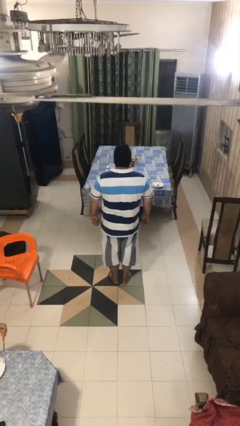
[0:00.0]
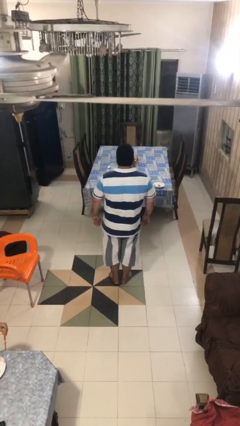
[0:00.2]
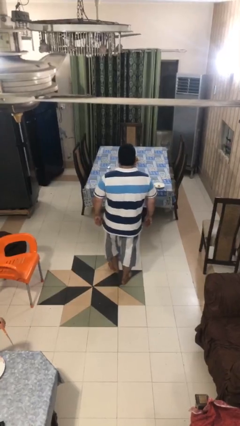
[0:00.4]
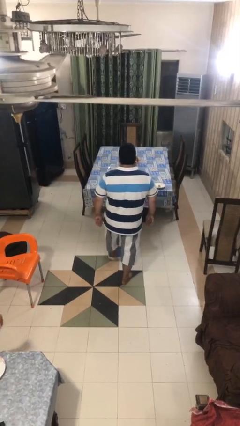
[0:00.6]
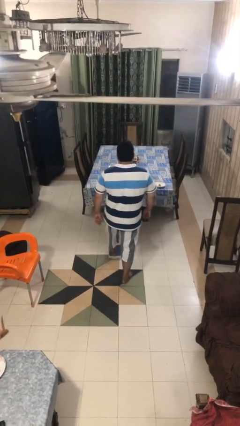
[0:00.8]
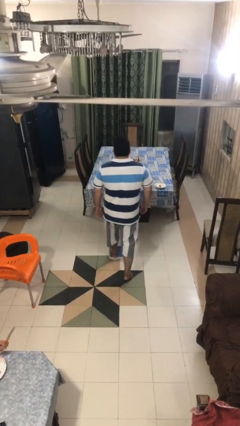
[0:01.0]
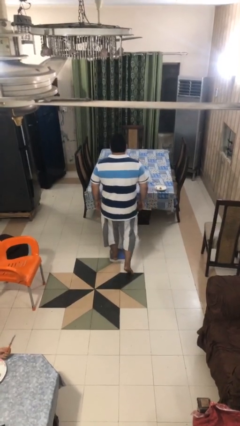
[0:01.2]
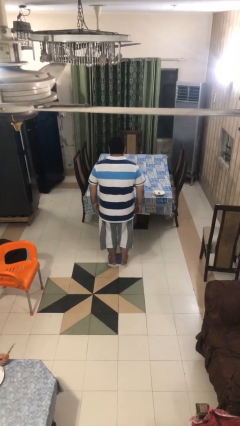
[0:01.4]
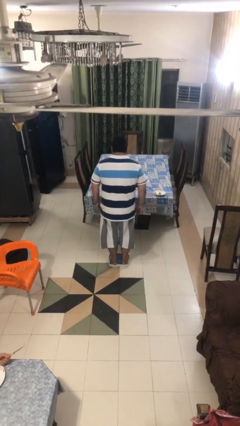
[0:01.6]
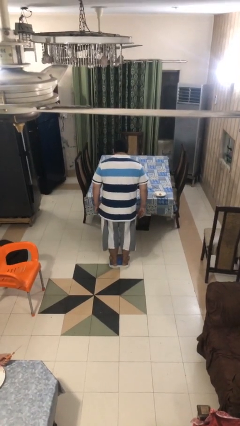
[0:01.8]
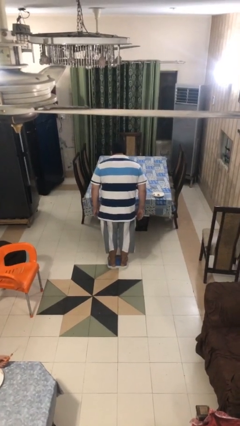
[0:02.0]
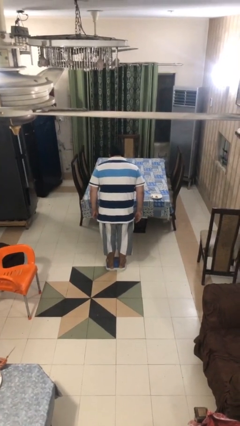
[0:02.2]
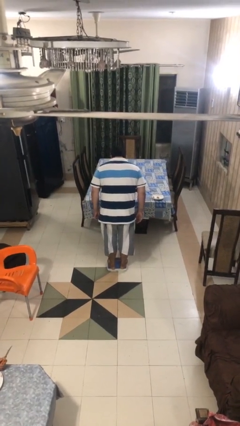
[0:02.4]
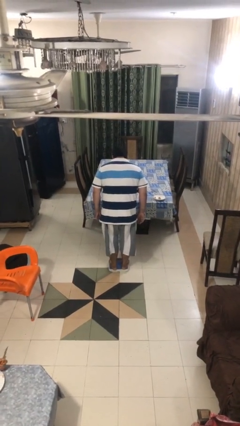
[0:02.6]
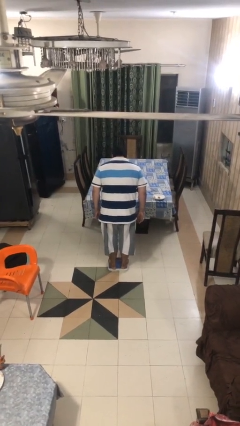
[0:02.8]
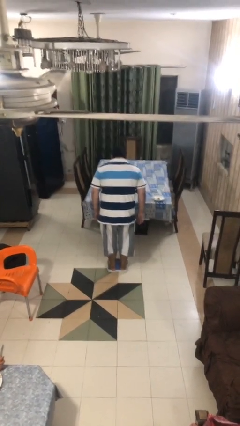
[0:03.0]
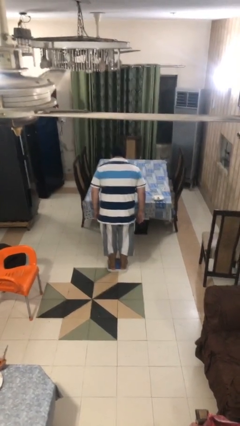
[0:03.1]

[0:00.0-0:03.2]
person uses bodyweight scale

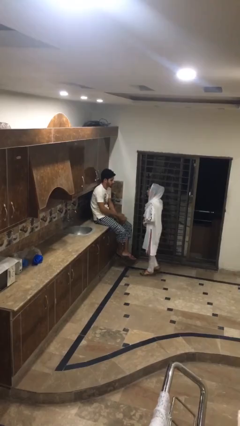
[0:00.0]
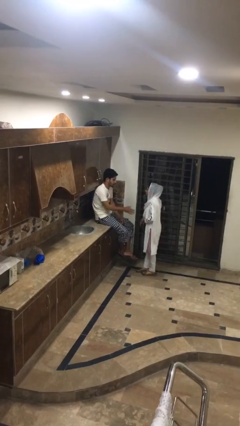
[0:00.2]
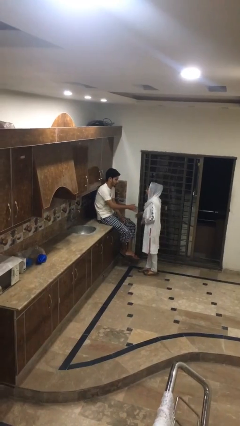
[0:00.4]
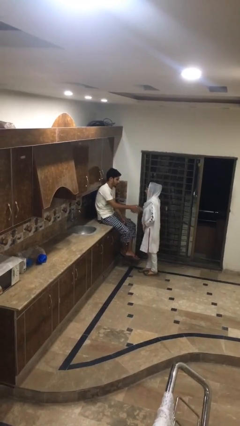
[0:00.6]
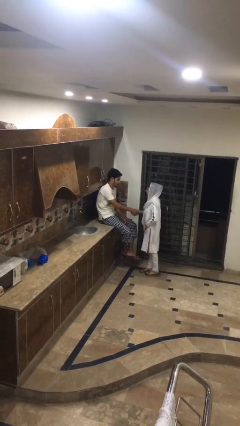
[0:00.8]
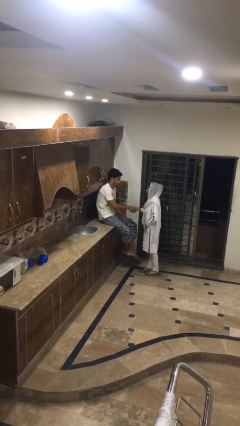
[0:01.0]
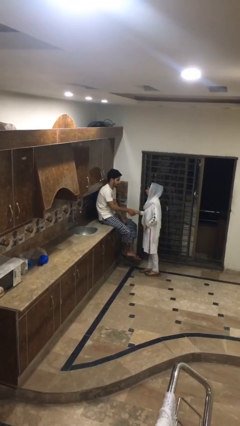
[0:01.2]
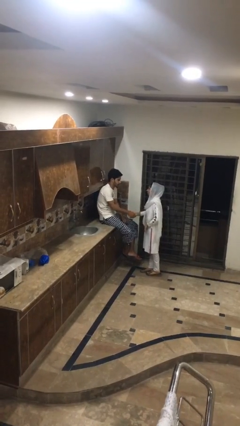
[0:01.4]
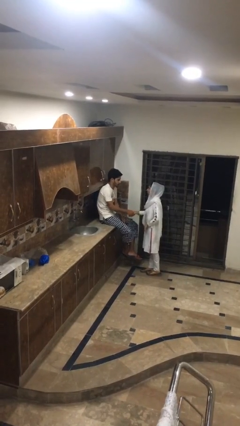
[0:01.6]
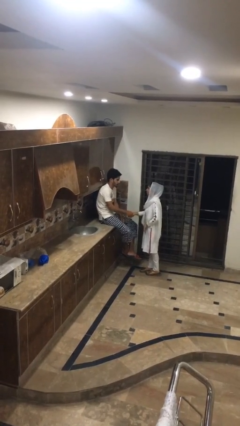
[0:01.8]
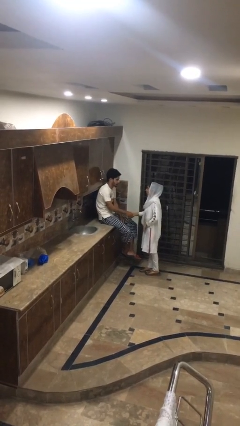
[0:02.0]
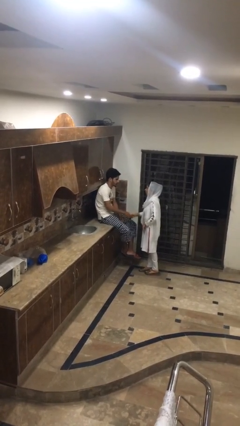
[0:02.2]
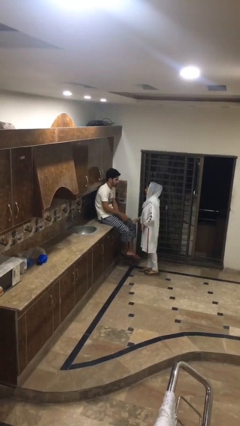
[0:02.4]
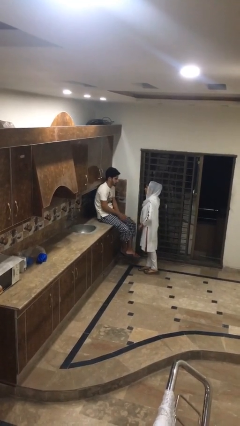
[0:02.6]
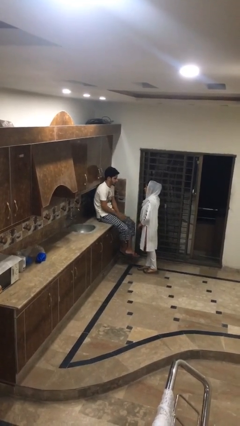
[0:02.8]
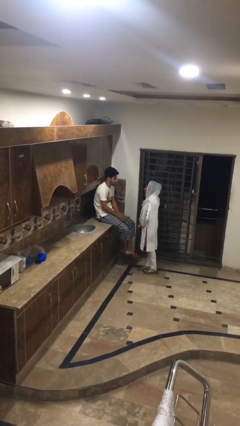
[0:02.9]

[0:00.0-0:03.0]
person shakes hand

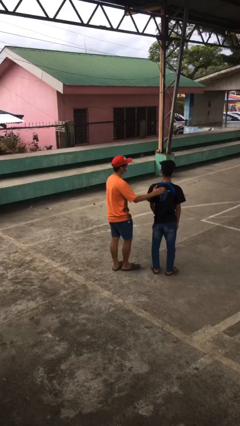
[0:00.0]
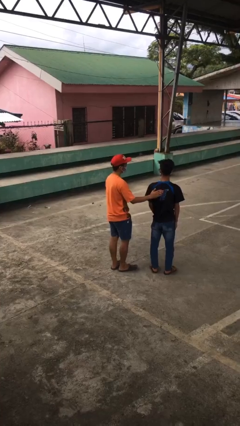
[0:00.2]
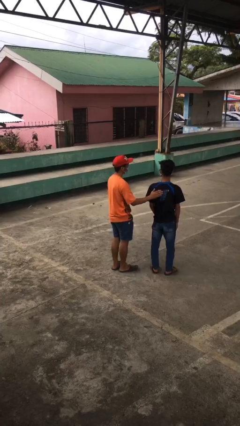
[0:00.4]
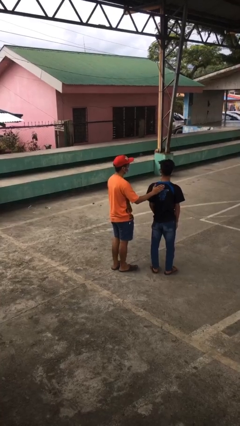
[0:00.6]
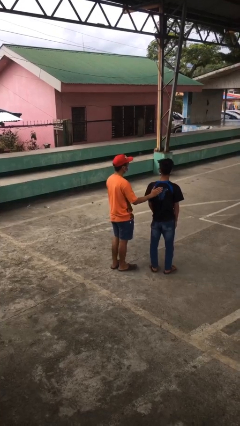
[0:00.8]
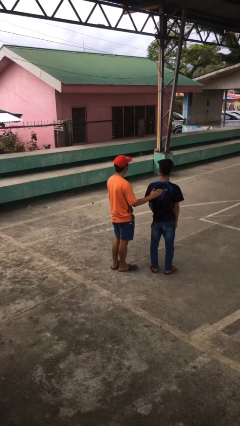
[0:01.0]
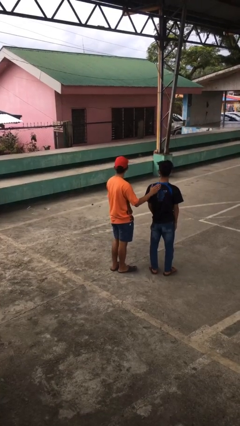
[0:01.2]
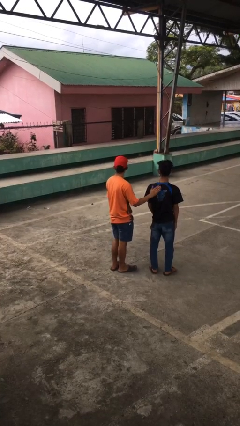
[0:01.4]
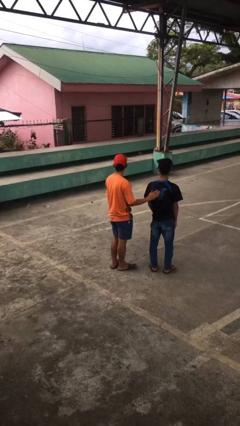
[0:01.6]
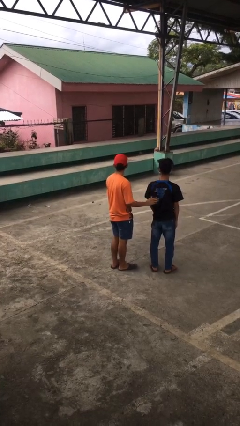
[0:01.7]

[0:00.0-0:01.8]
person touches back of person

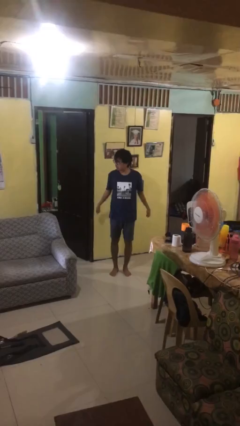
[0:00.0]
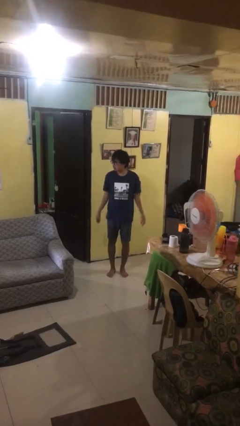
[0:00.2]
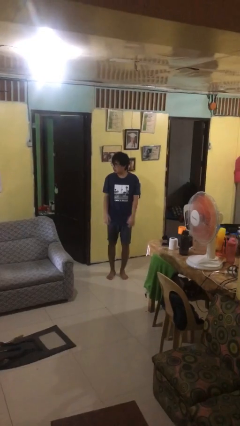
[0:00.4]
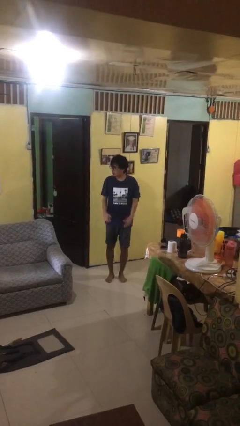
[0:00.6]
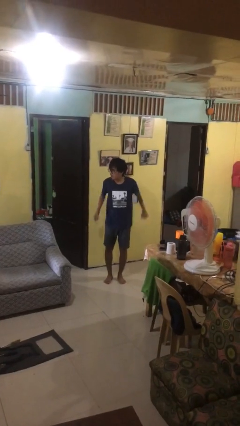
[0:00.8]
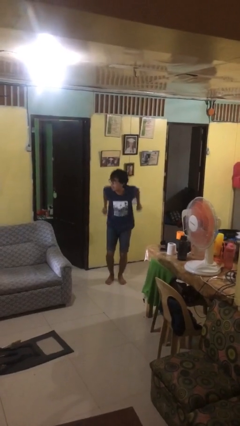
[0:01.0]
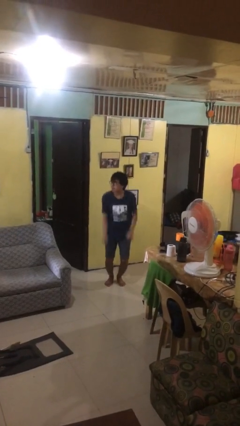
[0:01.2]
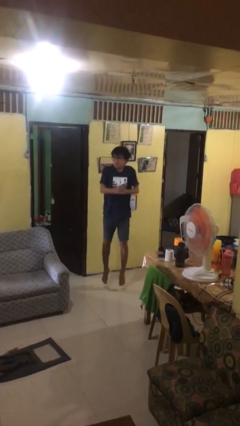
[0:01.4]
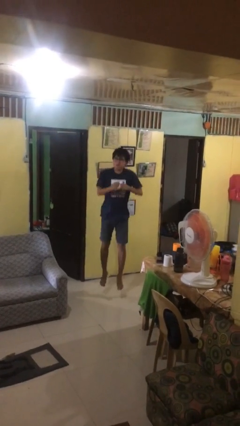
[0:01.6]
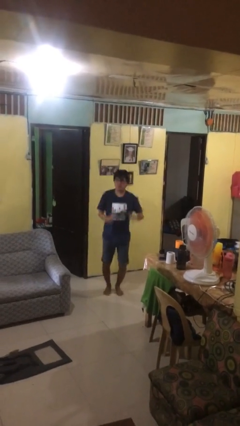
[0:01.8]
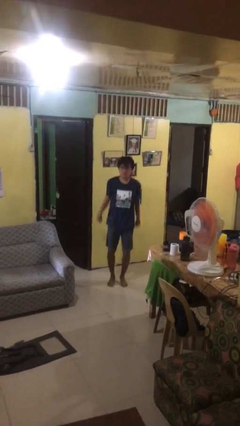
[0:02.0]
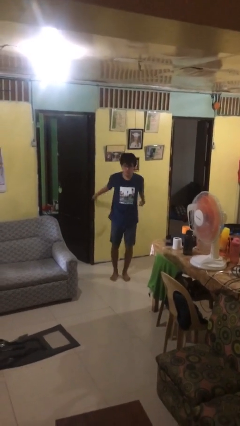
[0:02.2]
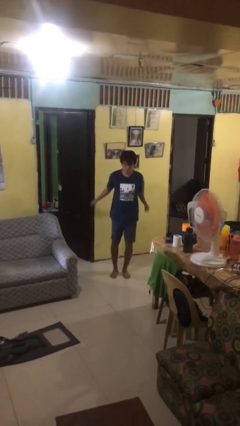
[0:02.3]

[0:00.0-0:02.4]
person jumps

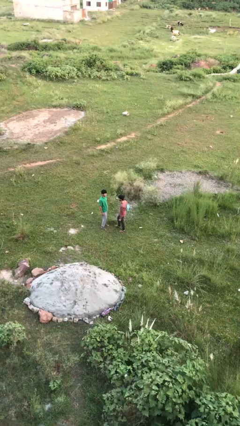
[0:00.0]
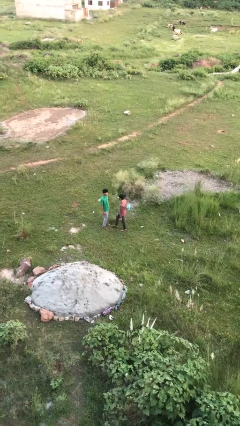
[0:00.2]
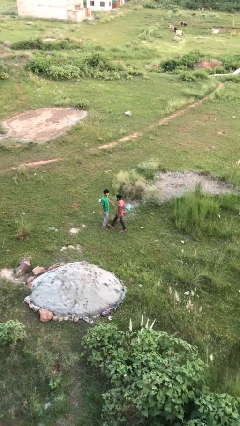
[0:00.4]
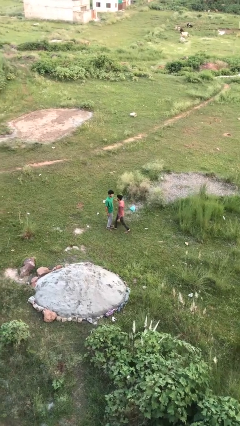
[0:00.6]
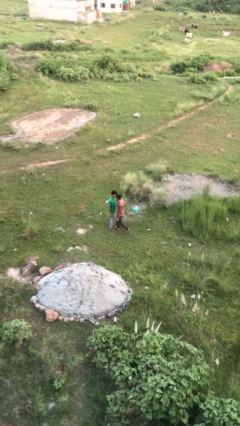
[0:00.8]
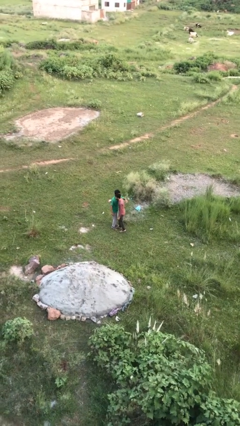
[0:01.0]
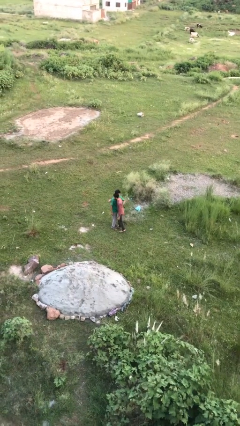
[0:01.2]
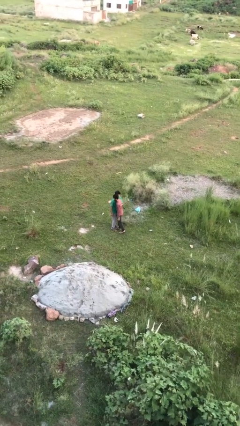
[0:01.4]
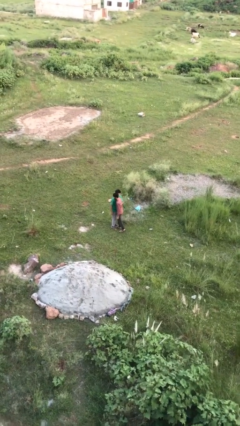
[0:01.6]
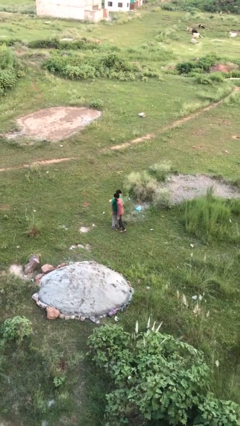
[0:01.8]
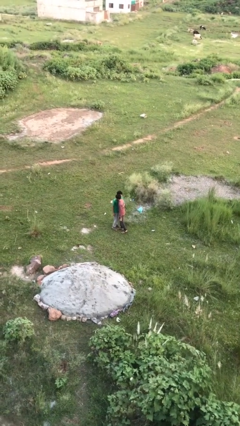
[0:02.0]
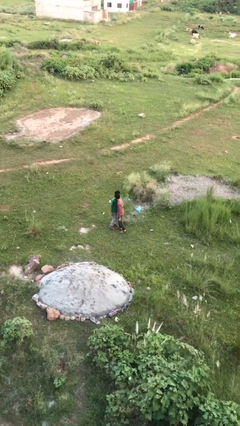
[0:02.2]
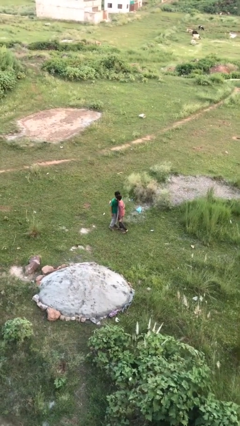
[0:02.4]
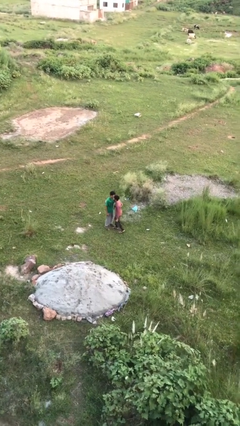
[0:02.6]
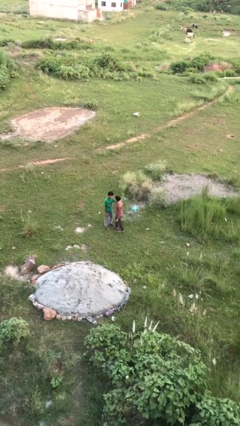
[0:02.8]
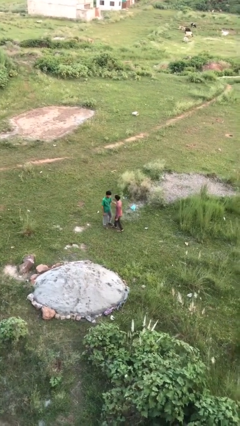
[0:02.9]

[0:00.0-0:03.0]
person embraces person

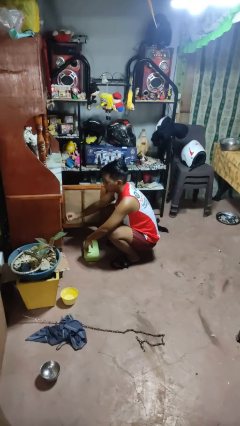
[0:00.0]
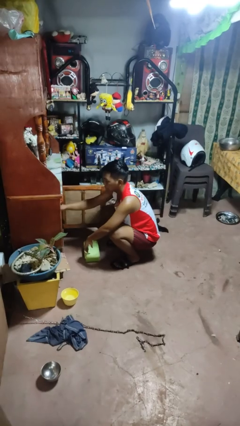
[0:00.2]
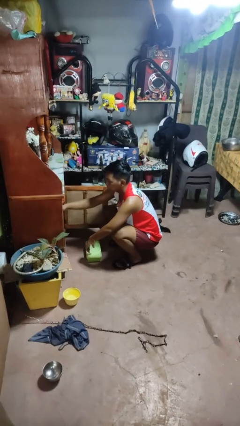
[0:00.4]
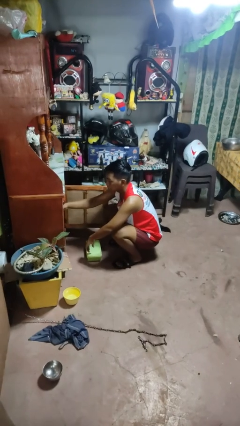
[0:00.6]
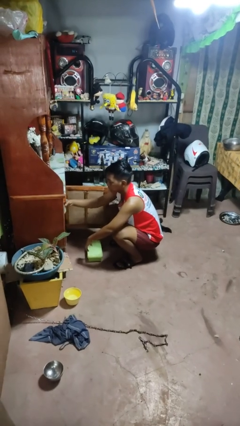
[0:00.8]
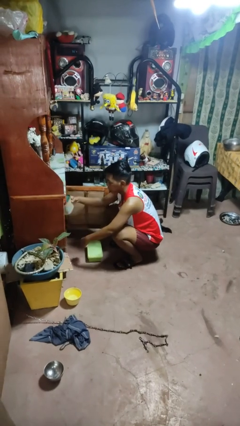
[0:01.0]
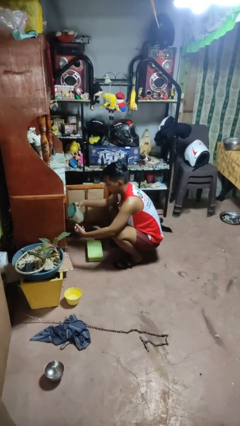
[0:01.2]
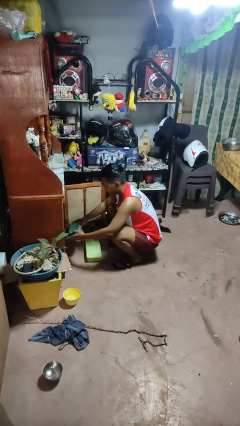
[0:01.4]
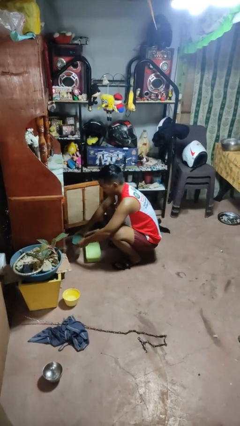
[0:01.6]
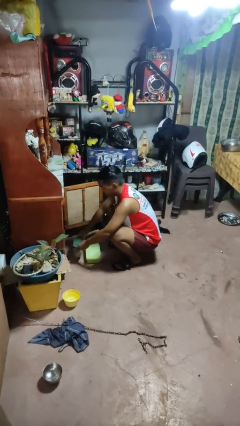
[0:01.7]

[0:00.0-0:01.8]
person takes object from cabinet

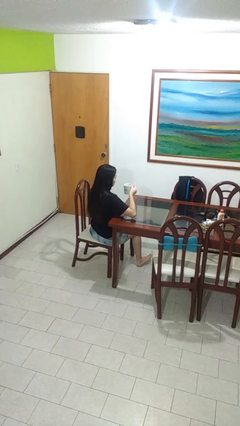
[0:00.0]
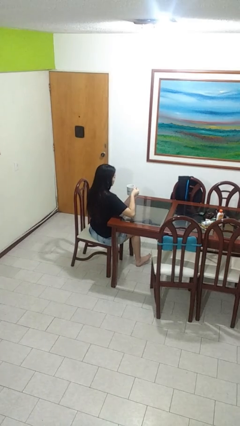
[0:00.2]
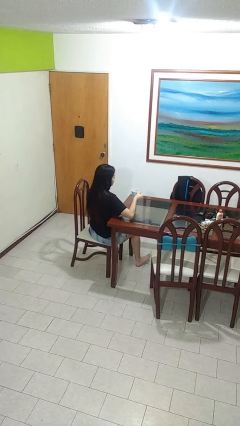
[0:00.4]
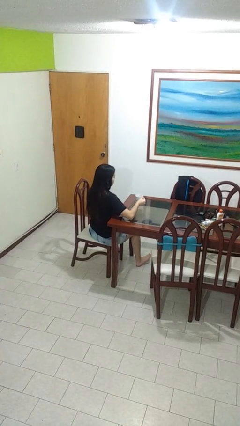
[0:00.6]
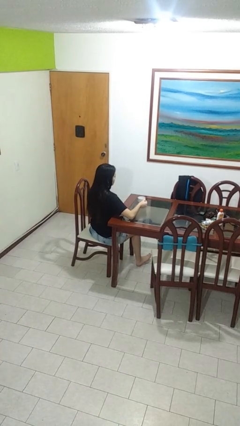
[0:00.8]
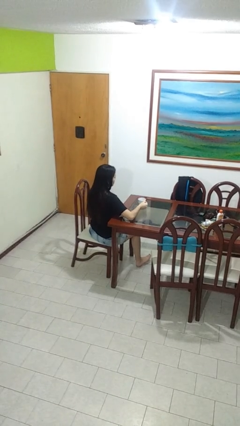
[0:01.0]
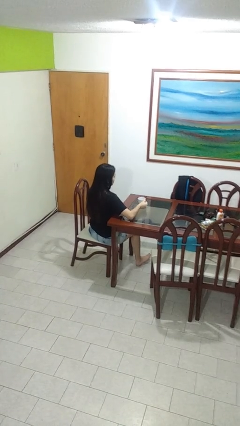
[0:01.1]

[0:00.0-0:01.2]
person puts down object on table
